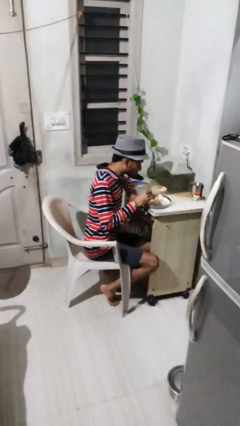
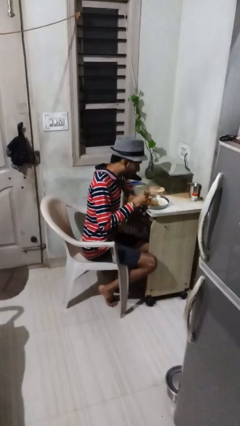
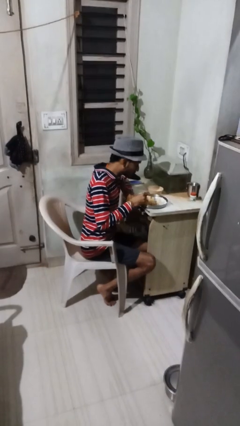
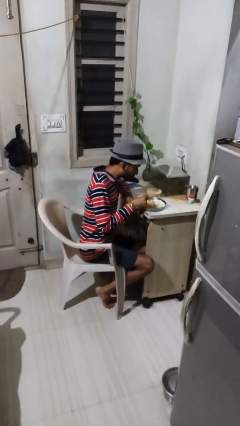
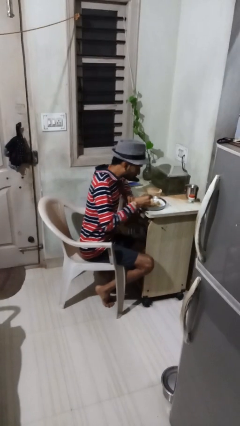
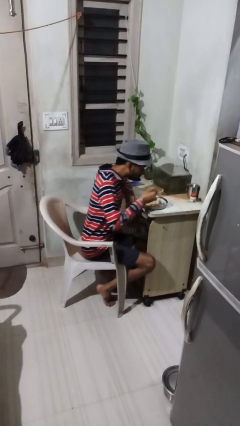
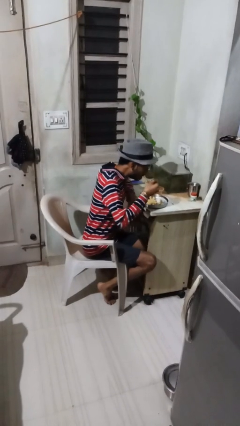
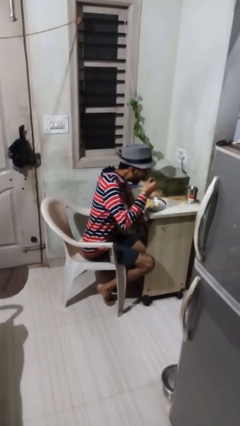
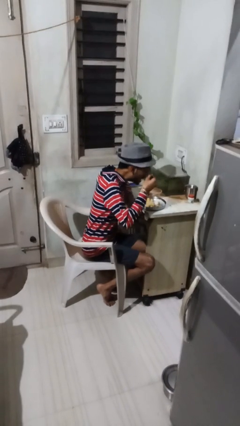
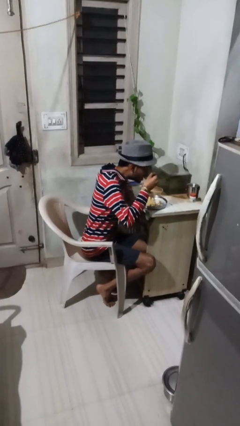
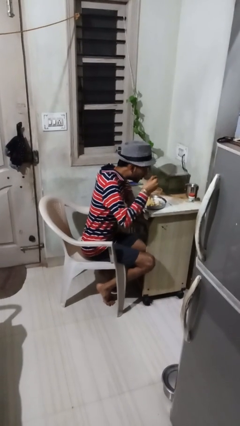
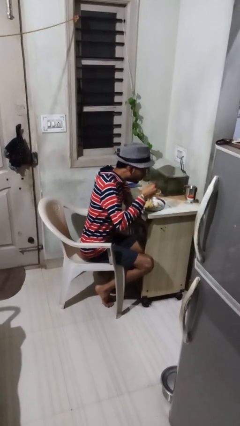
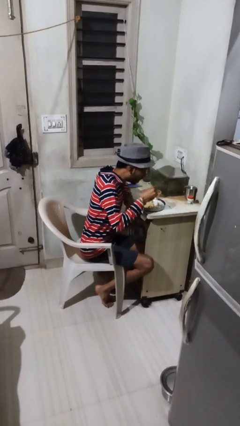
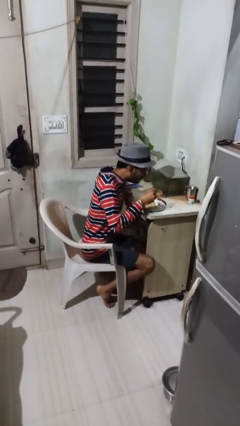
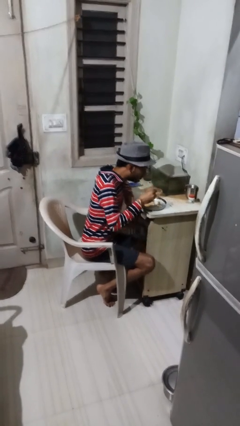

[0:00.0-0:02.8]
person eats with utensil

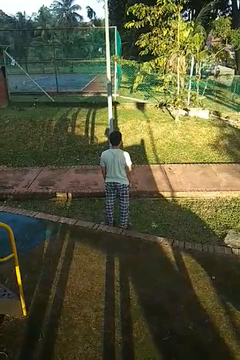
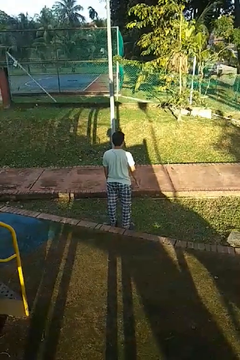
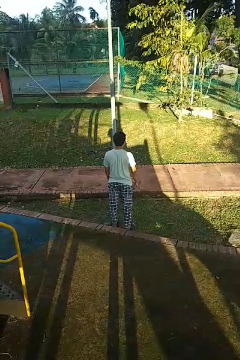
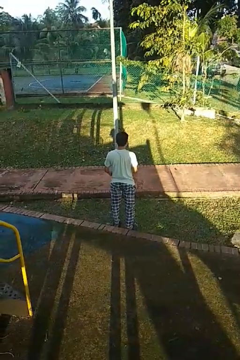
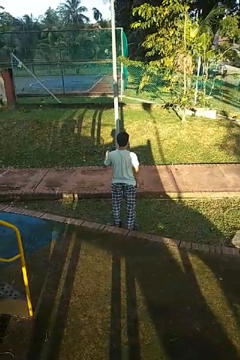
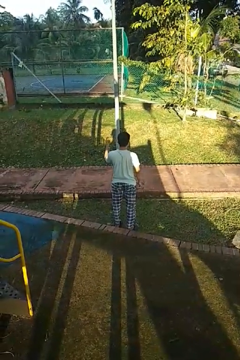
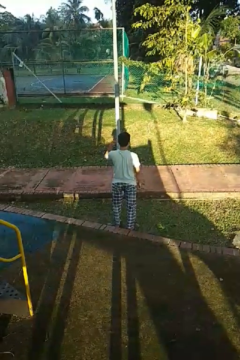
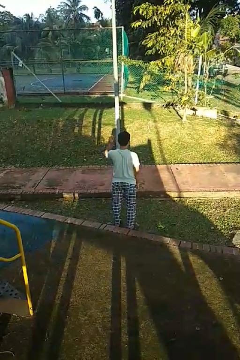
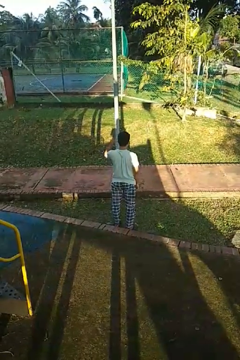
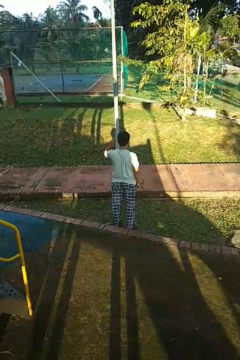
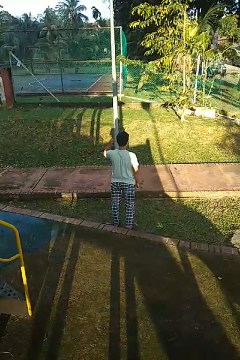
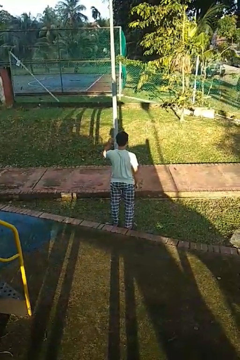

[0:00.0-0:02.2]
person gestures listen closely

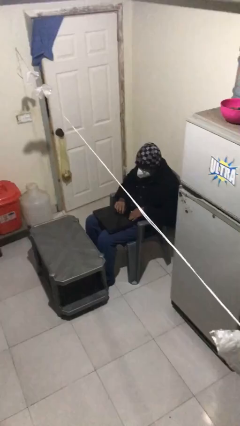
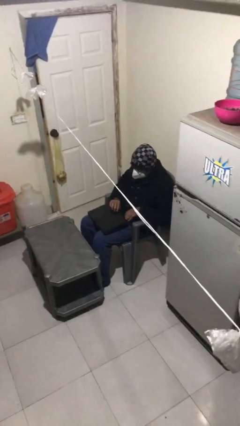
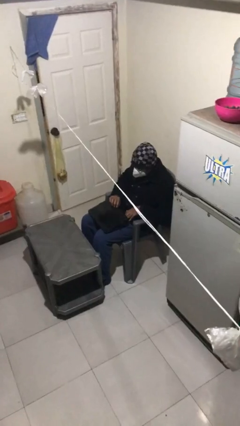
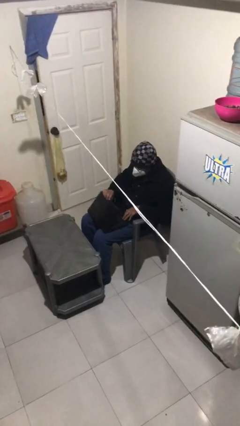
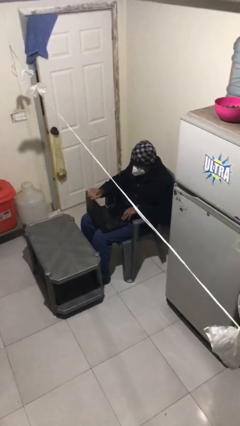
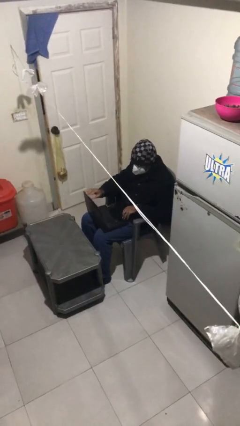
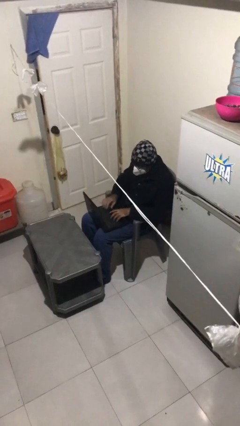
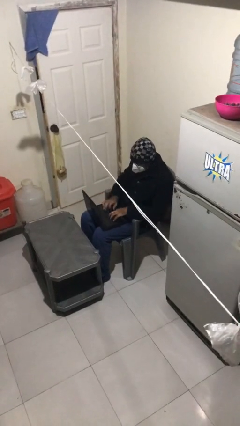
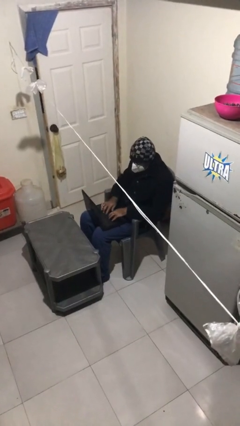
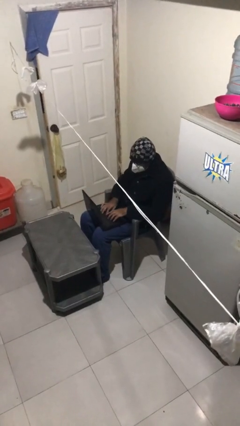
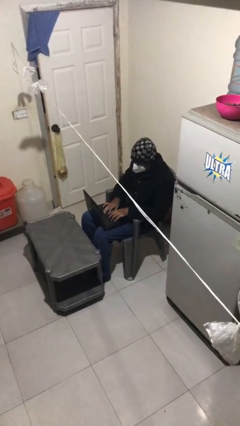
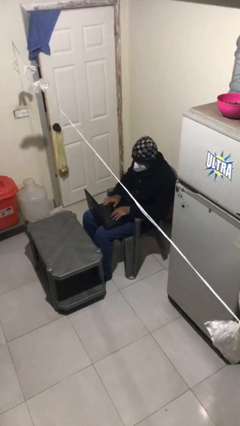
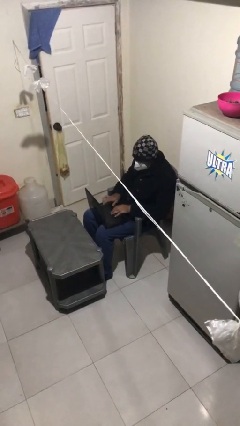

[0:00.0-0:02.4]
person interacts with laptop

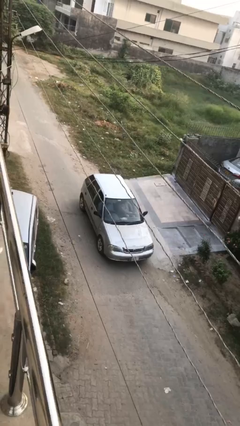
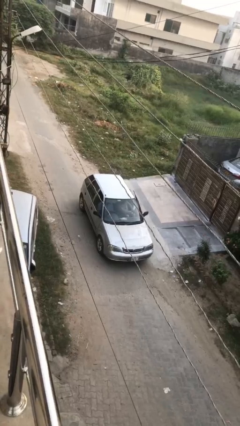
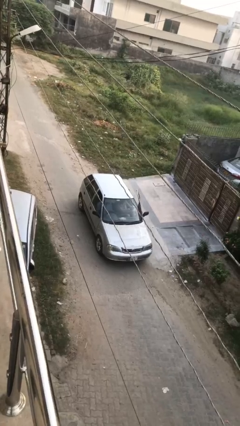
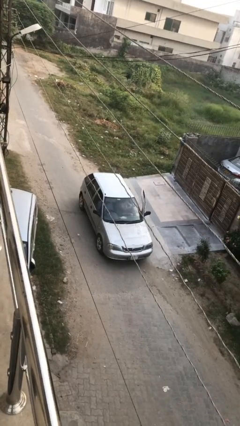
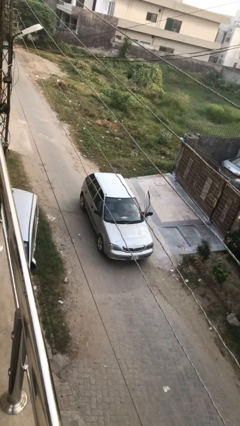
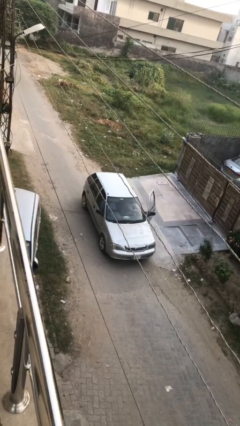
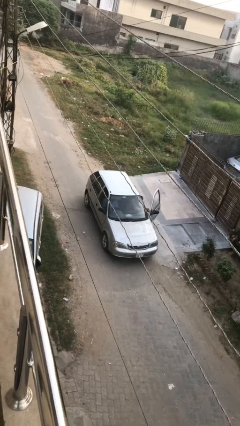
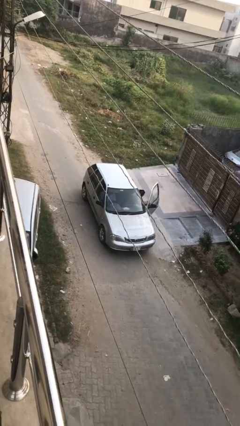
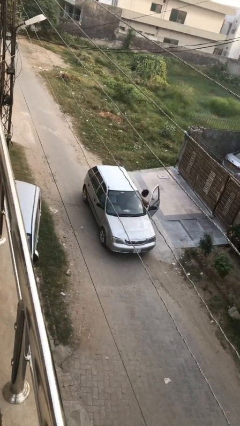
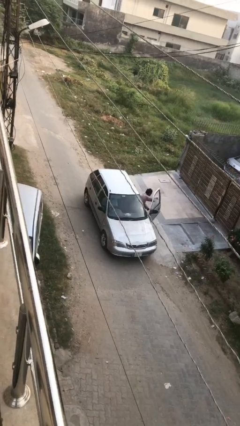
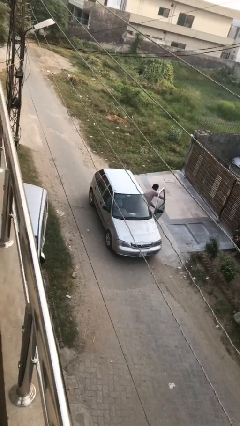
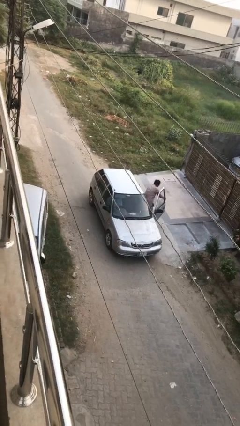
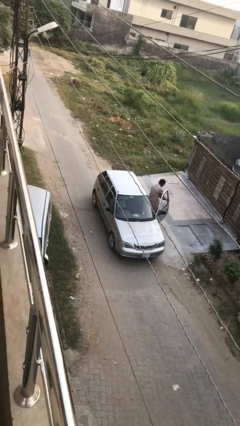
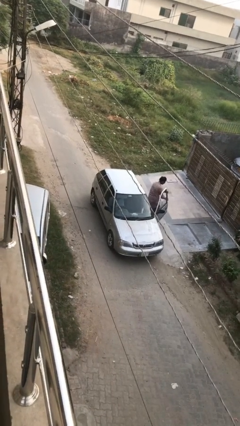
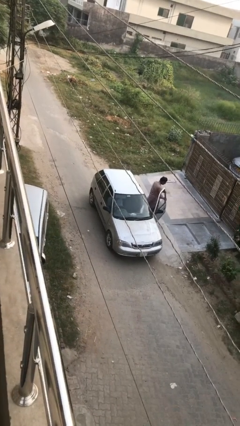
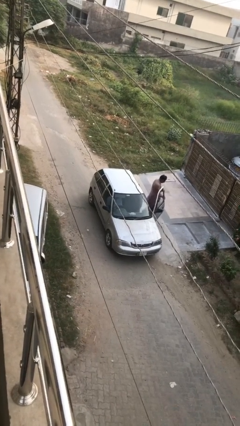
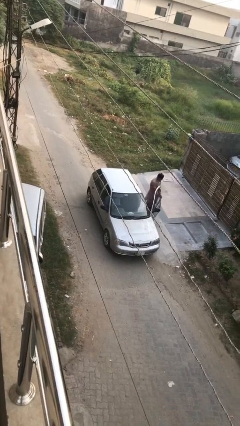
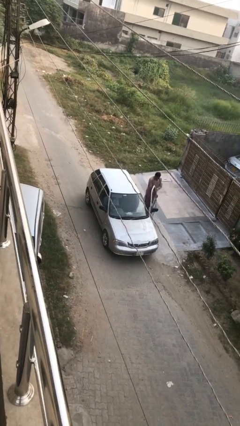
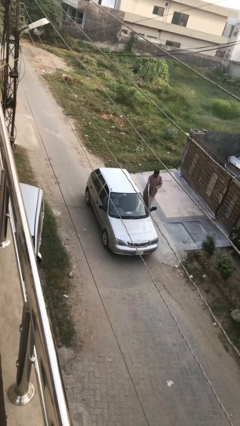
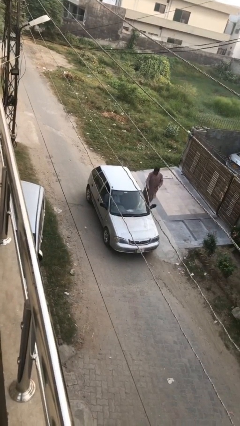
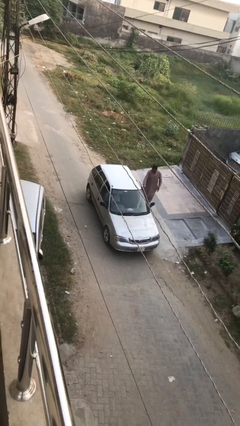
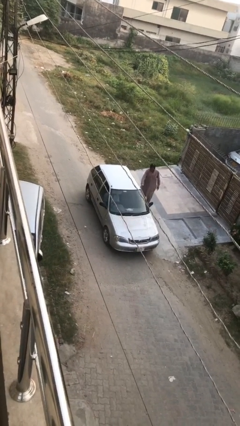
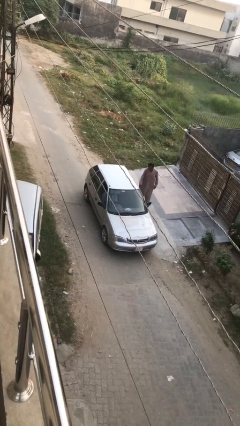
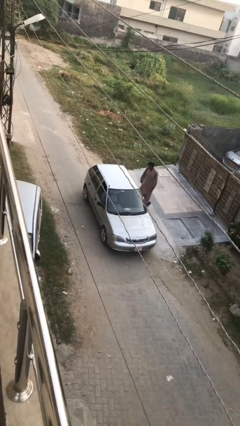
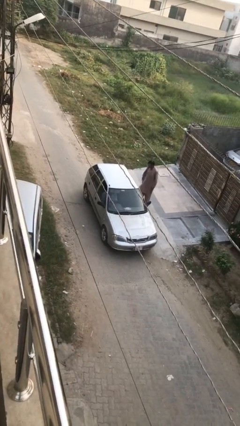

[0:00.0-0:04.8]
car drops off person

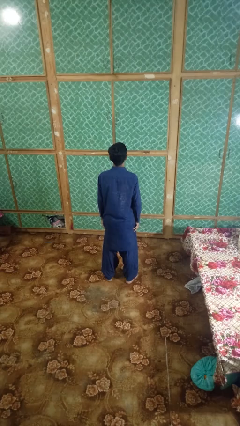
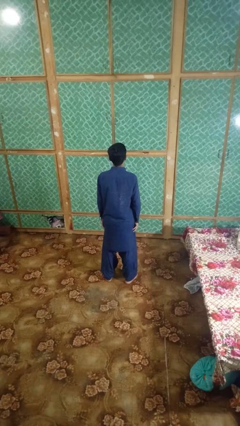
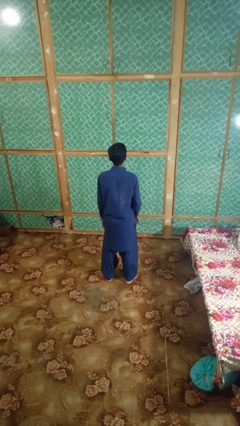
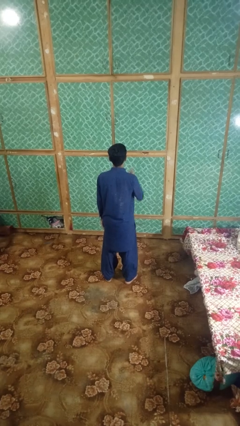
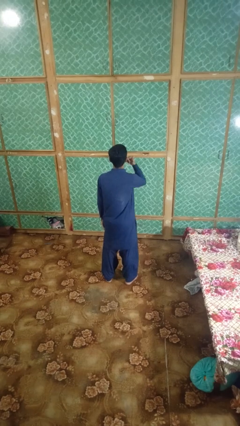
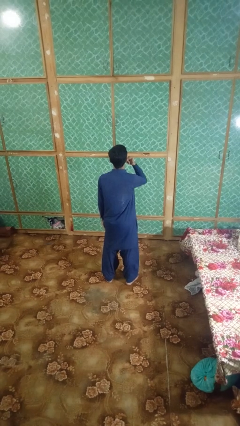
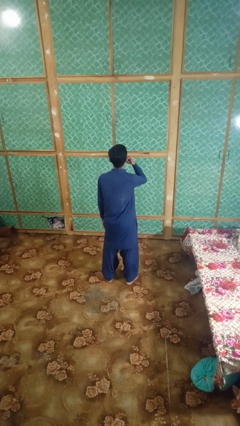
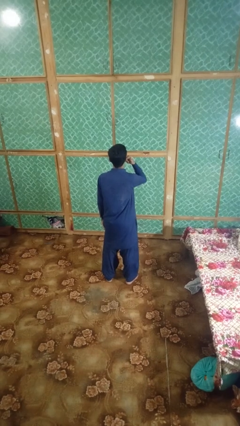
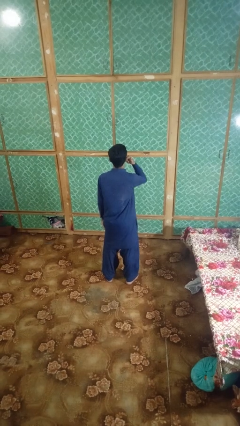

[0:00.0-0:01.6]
person gestures call me

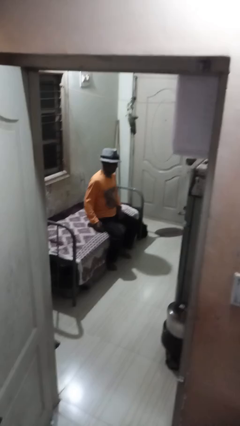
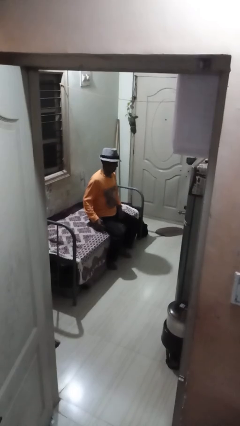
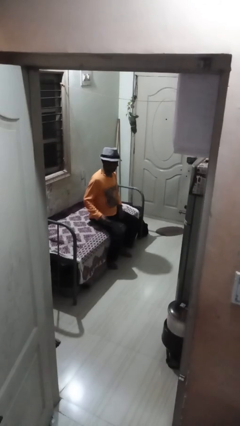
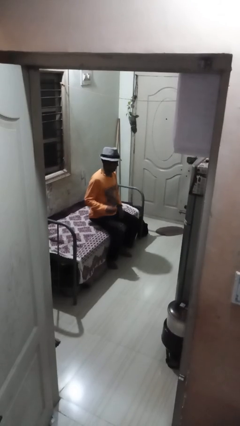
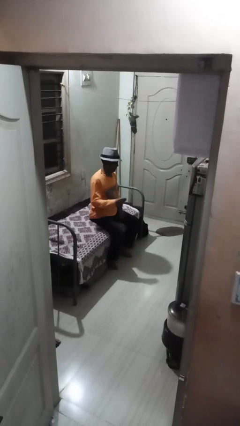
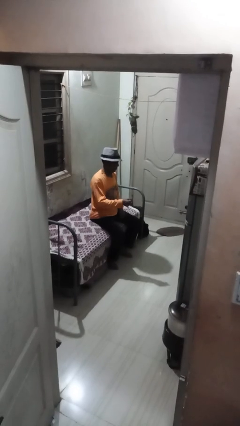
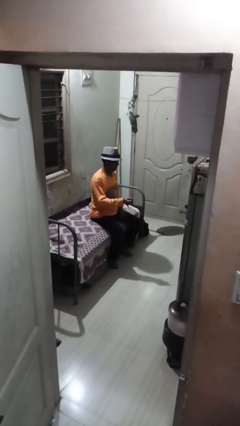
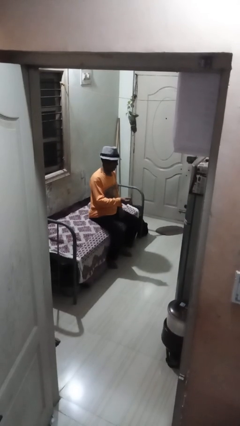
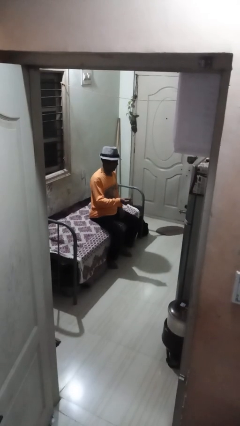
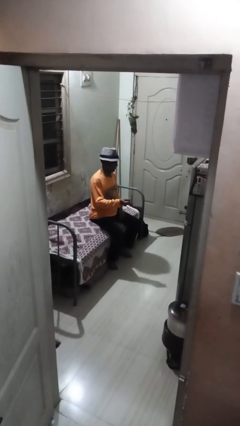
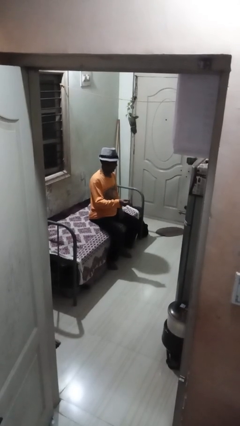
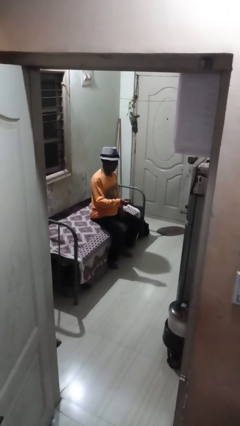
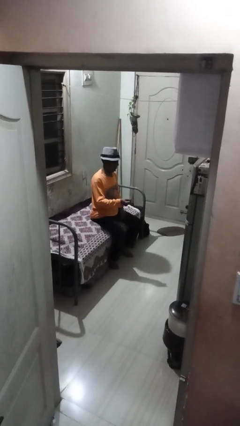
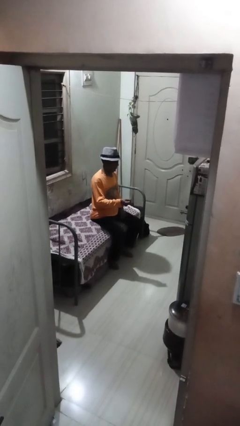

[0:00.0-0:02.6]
person snaps fingers

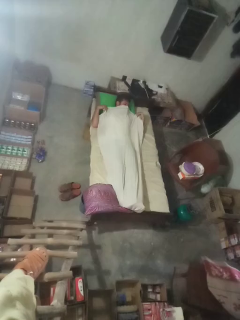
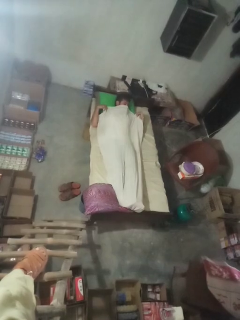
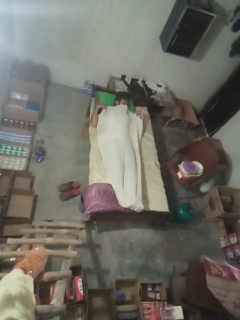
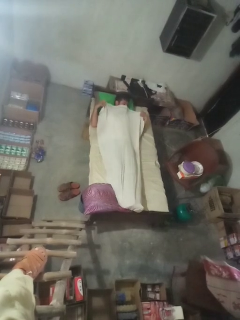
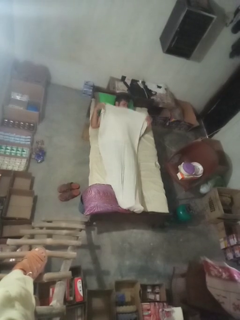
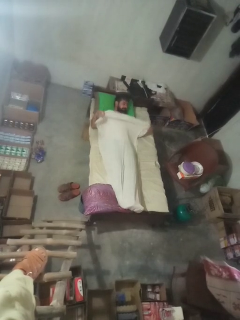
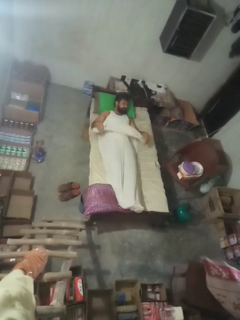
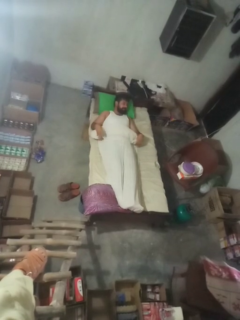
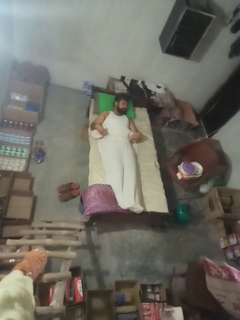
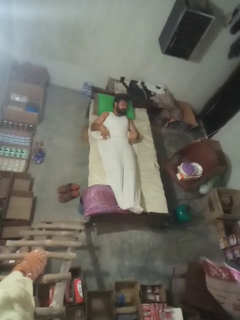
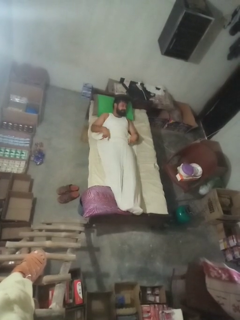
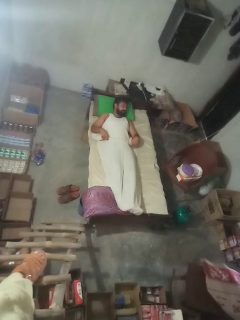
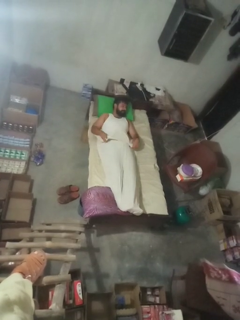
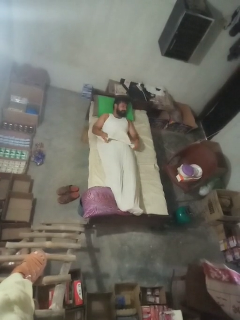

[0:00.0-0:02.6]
person uncovers with bedsheets
